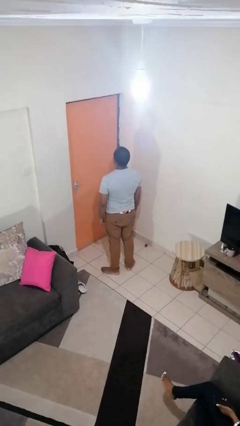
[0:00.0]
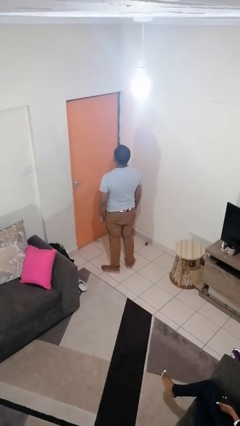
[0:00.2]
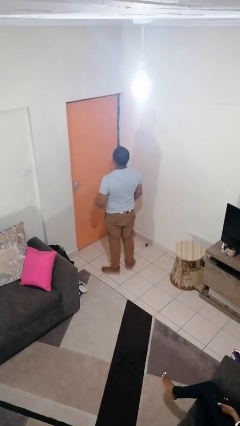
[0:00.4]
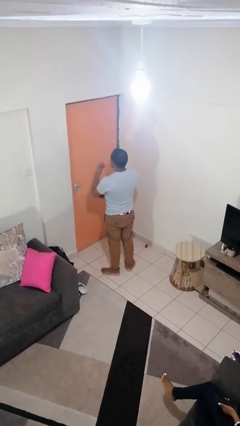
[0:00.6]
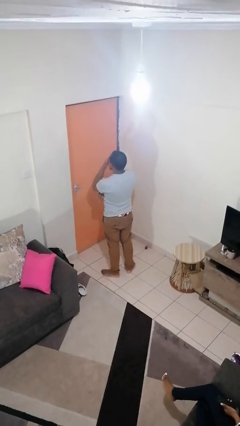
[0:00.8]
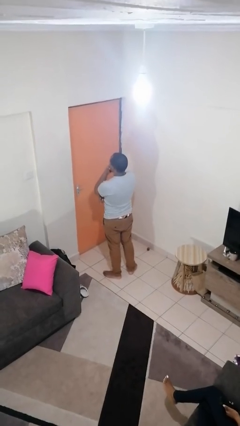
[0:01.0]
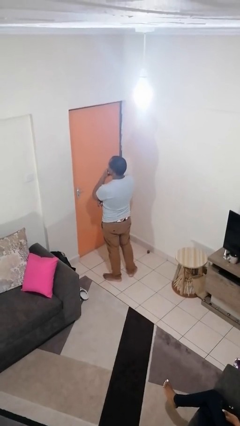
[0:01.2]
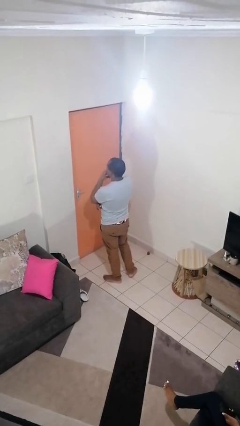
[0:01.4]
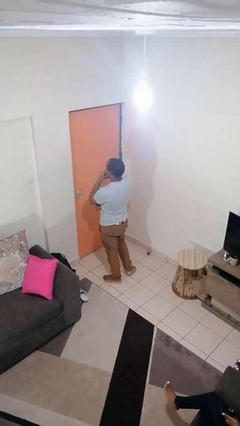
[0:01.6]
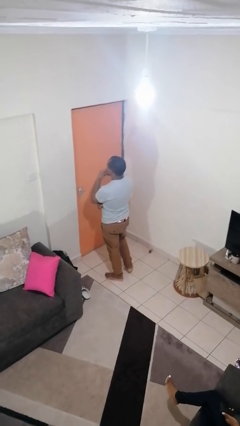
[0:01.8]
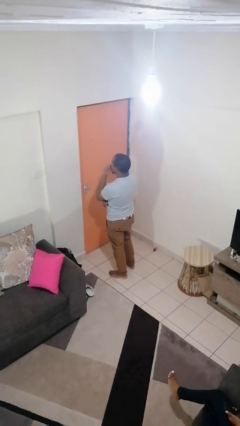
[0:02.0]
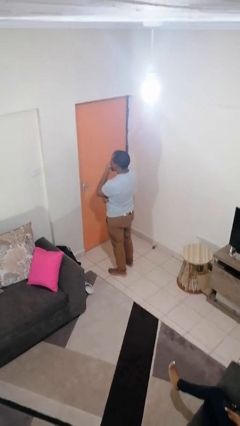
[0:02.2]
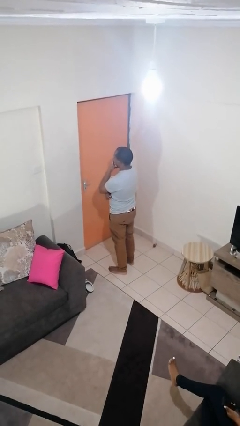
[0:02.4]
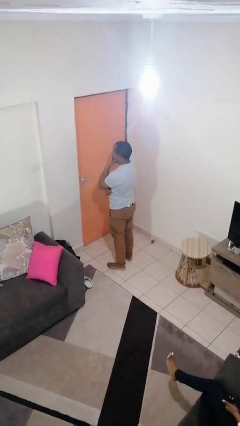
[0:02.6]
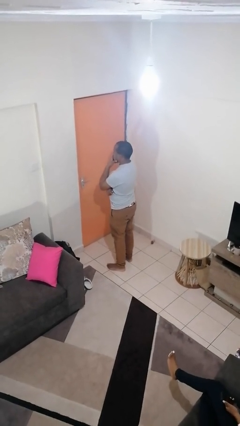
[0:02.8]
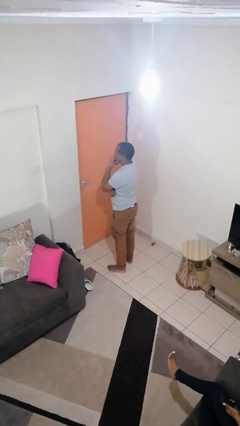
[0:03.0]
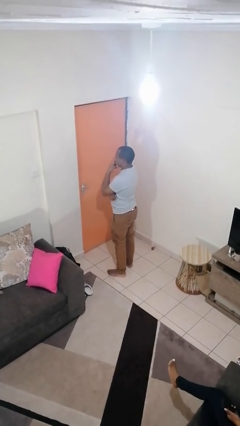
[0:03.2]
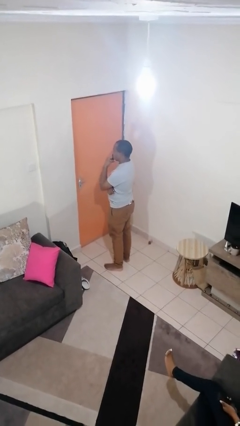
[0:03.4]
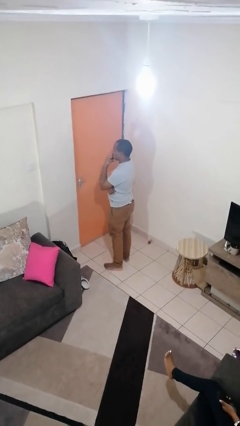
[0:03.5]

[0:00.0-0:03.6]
person strokes chin

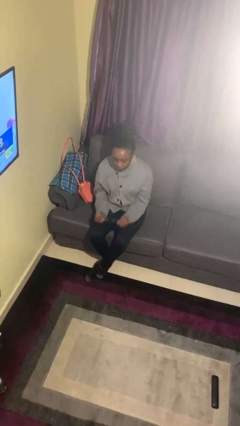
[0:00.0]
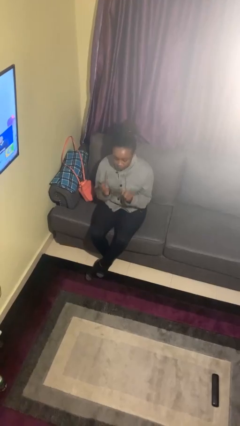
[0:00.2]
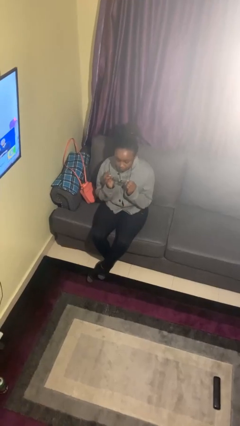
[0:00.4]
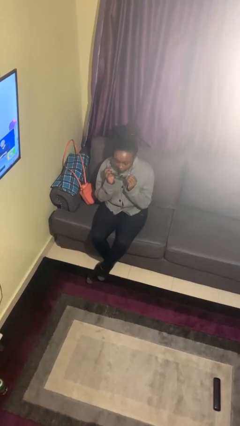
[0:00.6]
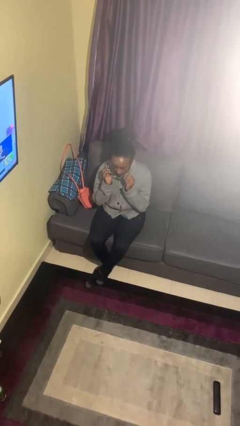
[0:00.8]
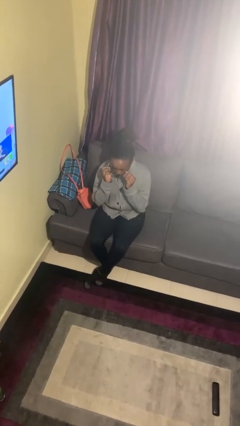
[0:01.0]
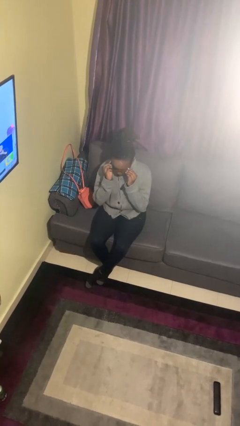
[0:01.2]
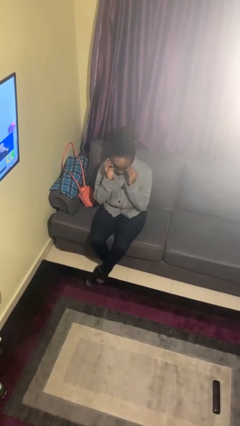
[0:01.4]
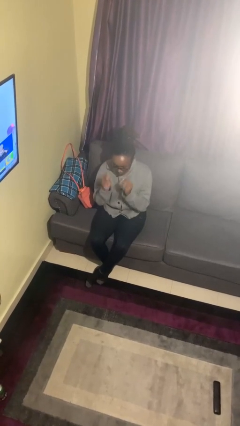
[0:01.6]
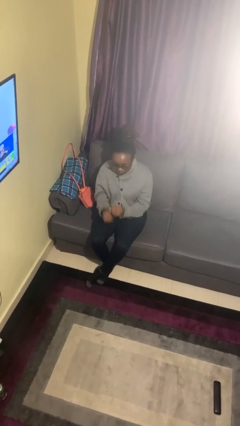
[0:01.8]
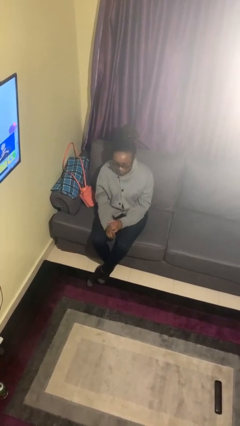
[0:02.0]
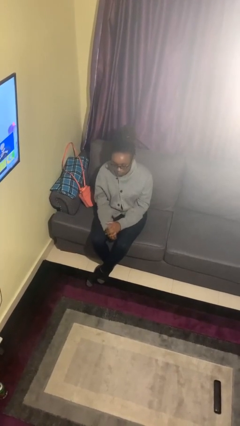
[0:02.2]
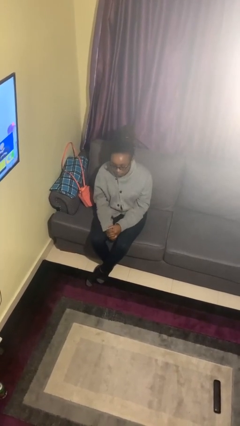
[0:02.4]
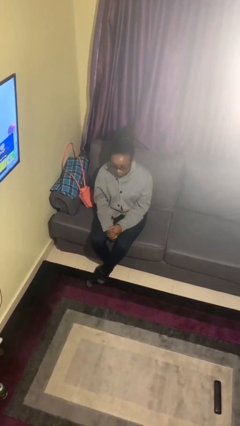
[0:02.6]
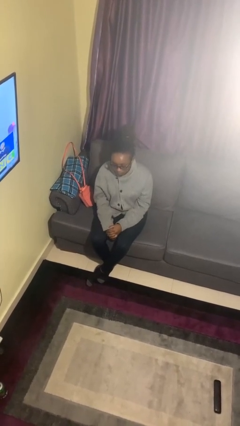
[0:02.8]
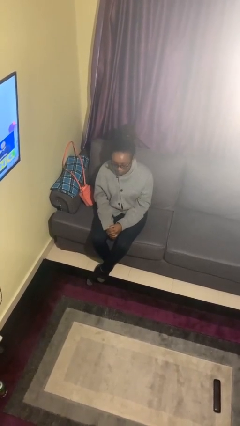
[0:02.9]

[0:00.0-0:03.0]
person puts on glasses

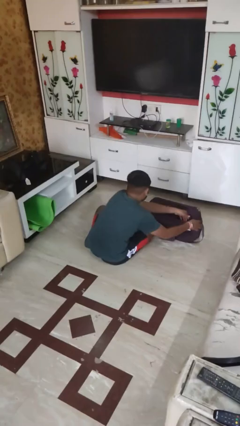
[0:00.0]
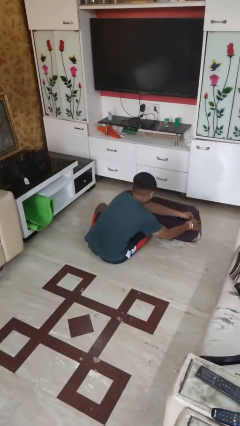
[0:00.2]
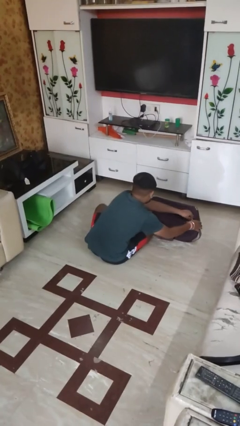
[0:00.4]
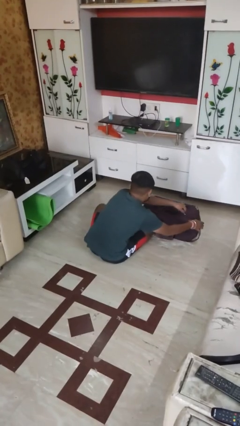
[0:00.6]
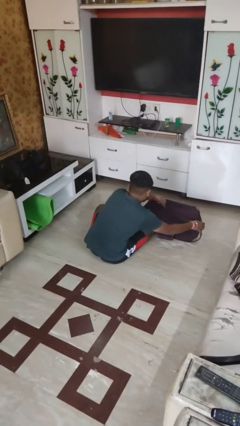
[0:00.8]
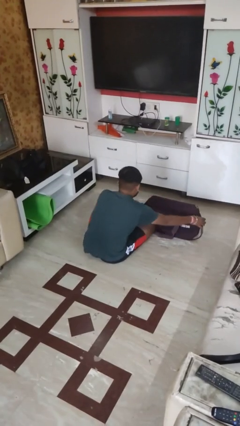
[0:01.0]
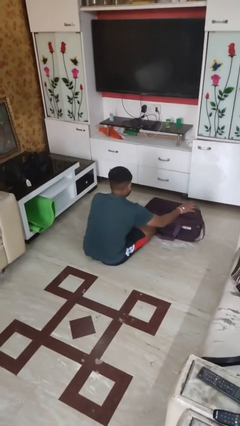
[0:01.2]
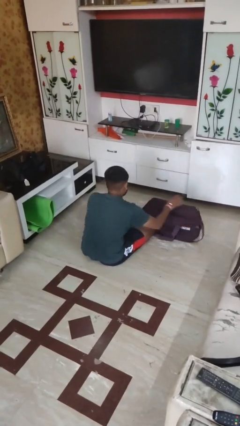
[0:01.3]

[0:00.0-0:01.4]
person closes suitcase

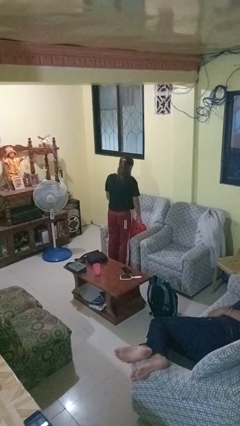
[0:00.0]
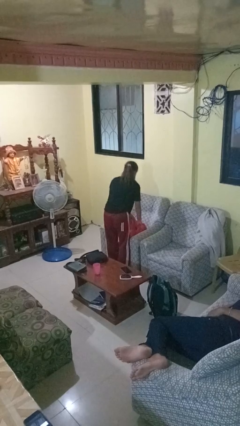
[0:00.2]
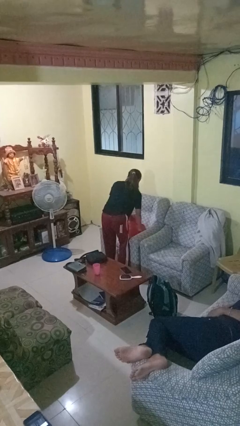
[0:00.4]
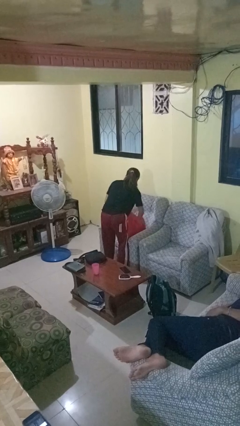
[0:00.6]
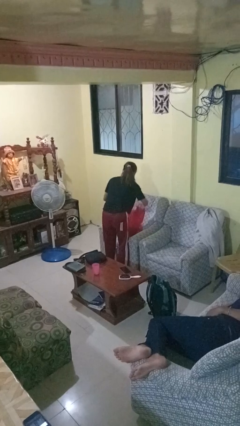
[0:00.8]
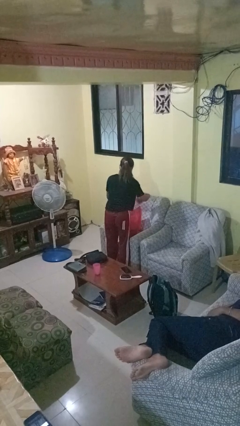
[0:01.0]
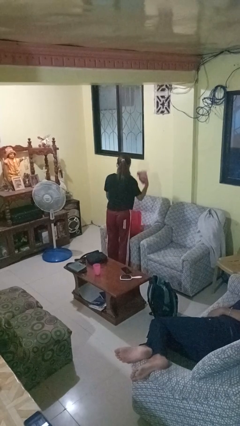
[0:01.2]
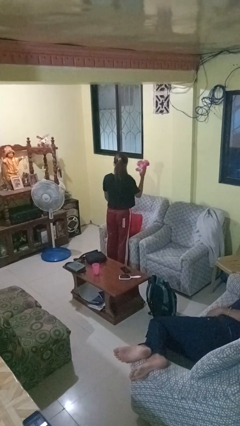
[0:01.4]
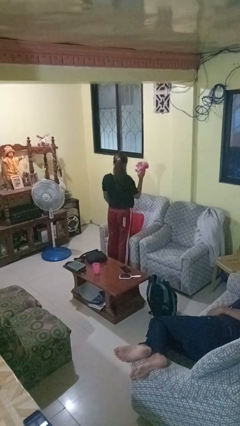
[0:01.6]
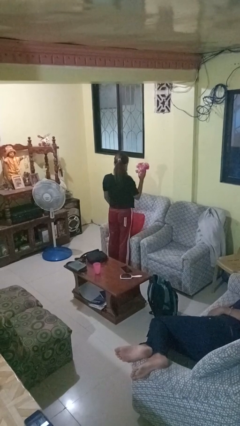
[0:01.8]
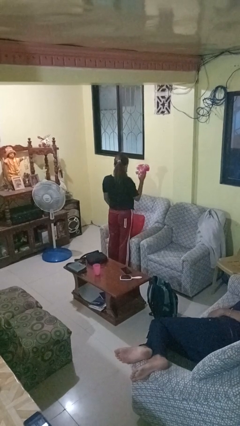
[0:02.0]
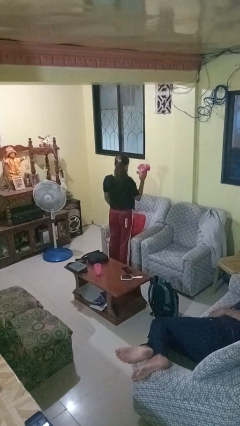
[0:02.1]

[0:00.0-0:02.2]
person takes object from bag

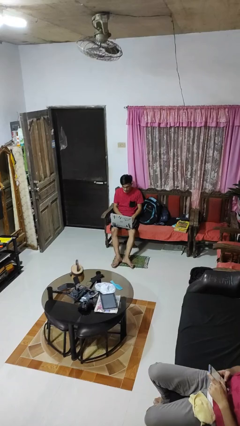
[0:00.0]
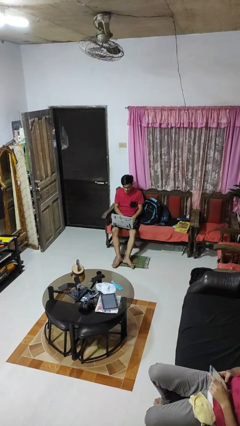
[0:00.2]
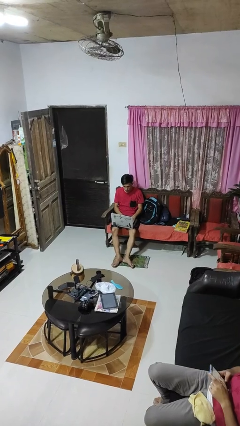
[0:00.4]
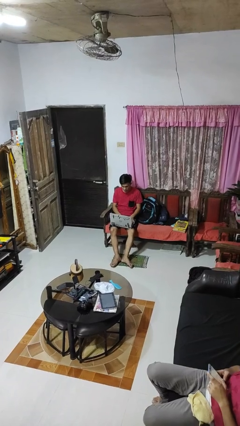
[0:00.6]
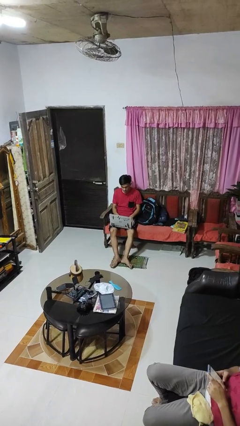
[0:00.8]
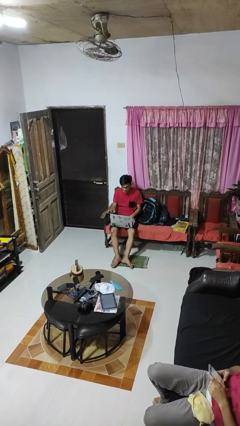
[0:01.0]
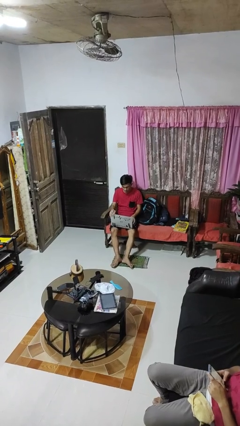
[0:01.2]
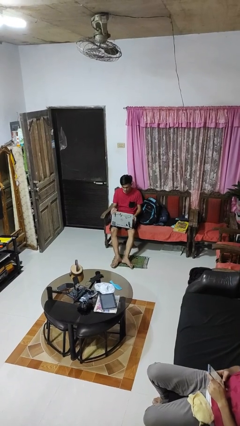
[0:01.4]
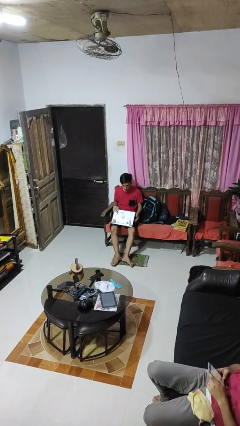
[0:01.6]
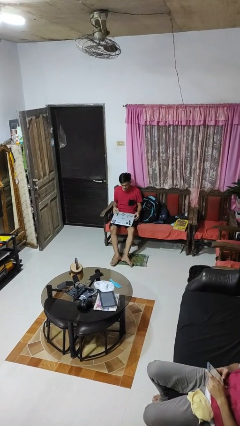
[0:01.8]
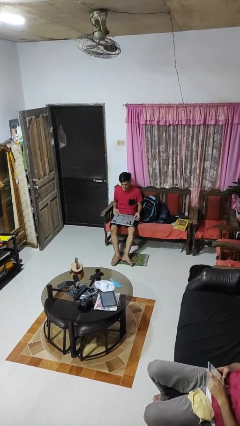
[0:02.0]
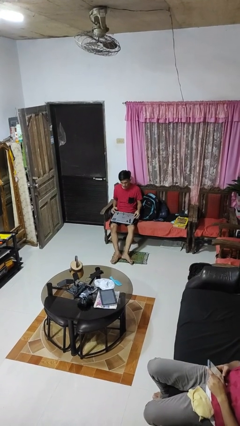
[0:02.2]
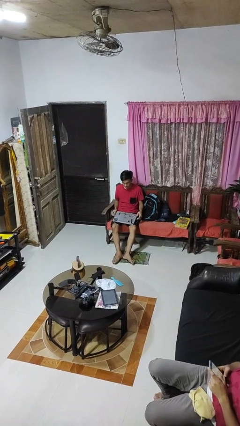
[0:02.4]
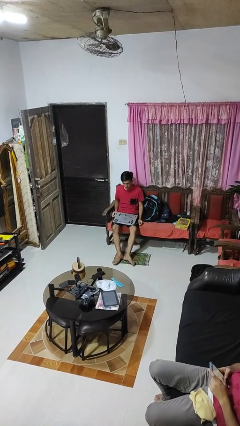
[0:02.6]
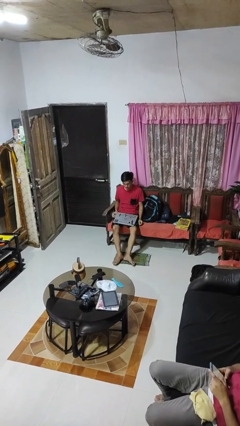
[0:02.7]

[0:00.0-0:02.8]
person closes laptop

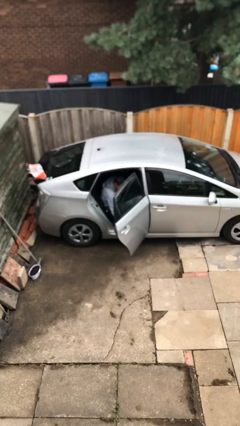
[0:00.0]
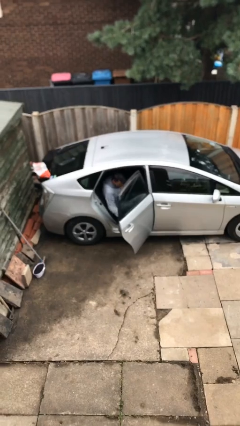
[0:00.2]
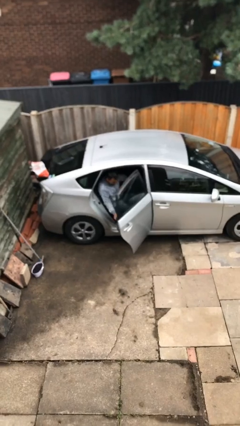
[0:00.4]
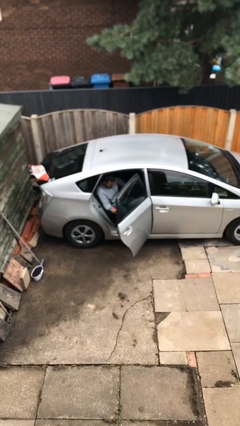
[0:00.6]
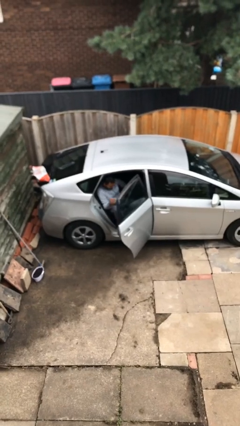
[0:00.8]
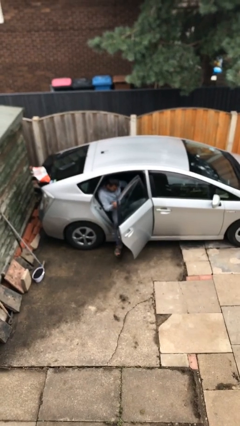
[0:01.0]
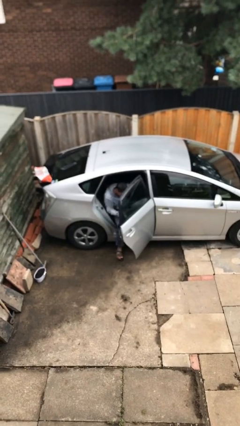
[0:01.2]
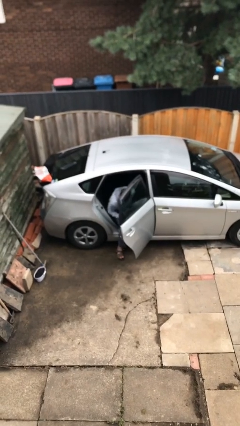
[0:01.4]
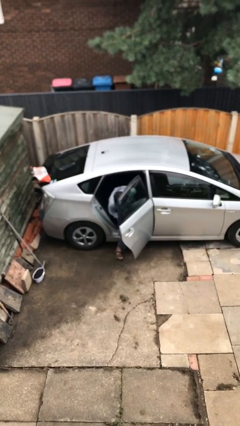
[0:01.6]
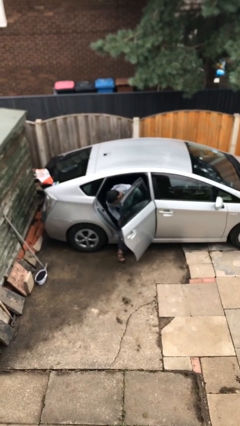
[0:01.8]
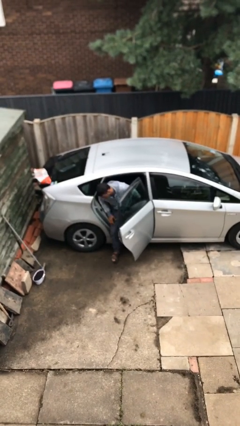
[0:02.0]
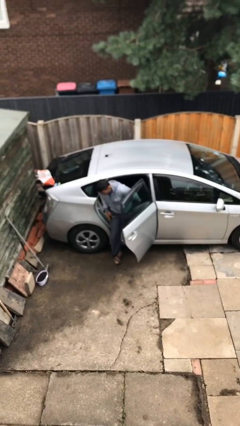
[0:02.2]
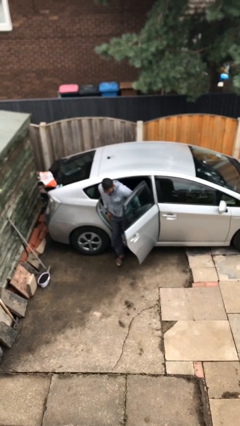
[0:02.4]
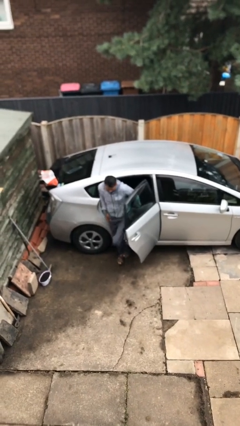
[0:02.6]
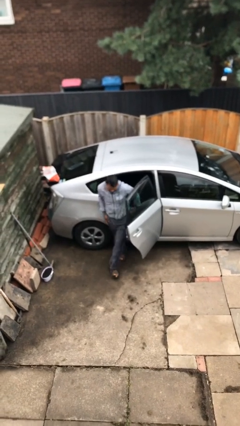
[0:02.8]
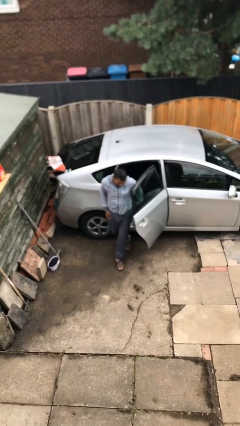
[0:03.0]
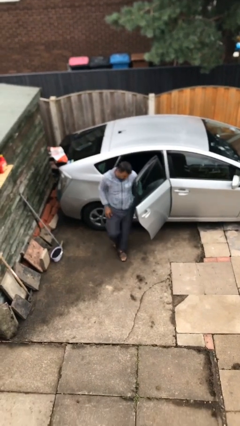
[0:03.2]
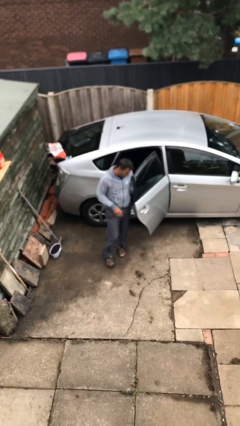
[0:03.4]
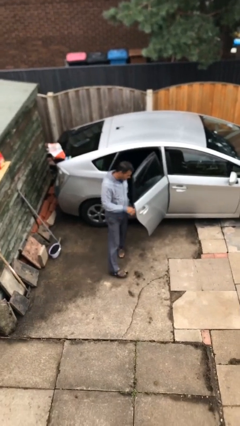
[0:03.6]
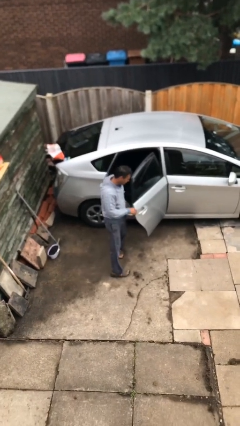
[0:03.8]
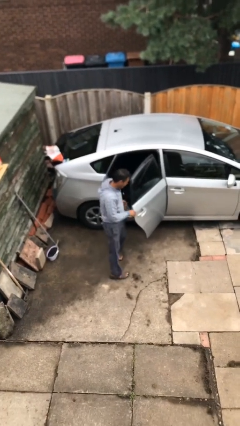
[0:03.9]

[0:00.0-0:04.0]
person exits car

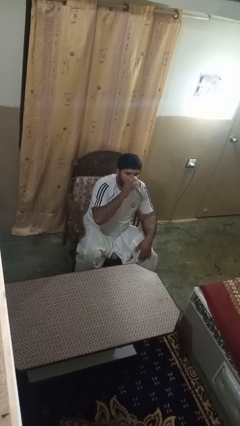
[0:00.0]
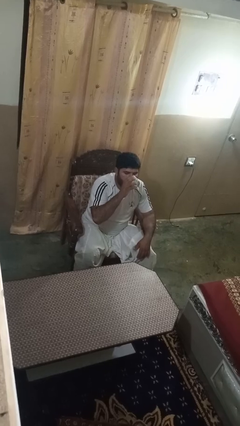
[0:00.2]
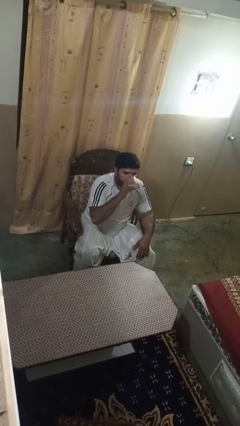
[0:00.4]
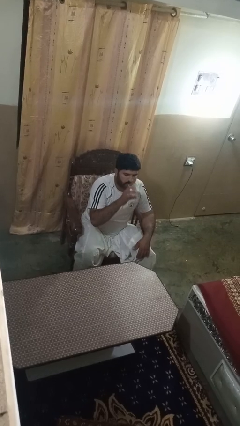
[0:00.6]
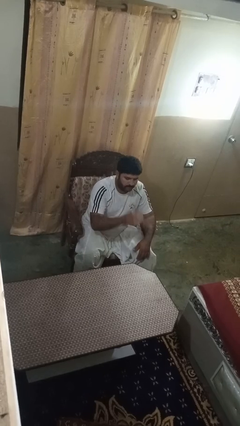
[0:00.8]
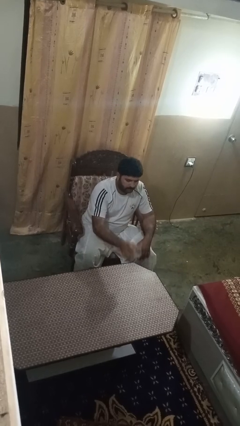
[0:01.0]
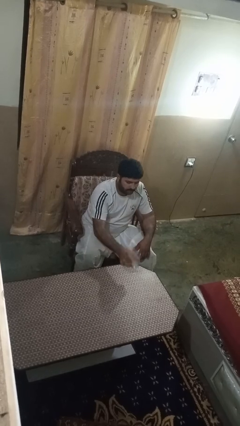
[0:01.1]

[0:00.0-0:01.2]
person puts down object on table
